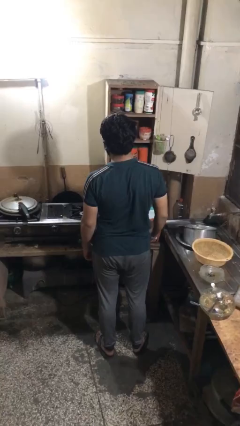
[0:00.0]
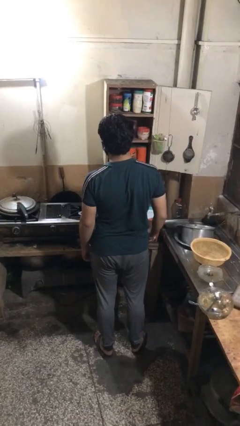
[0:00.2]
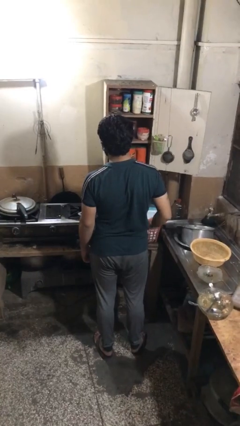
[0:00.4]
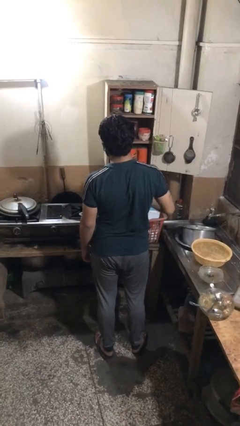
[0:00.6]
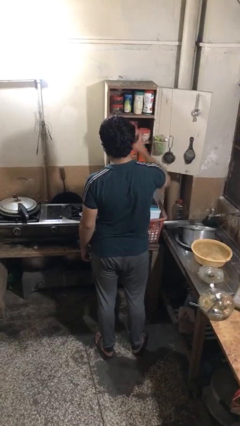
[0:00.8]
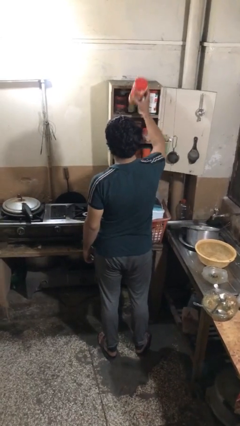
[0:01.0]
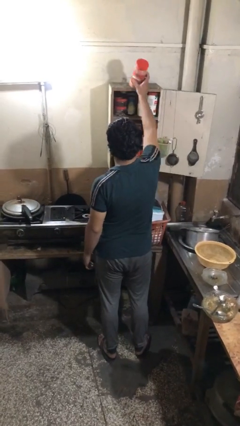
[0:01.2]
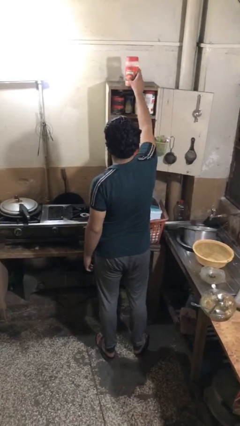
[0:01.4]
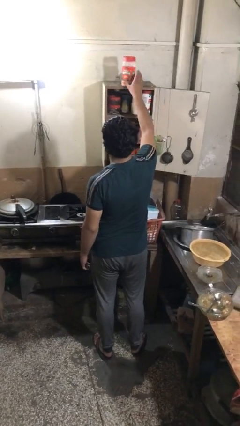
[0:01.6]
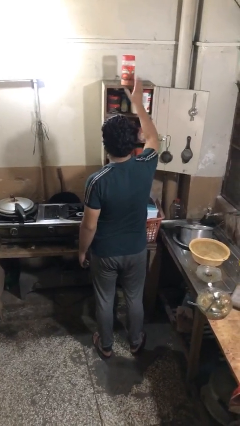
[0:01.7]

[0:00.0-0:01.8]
person takes object from cabinet

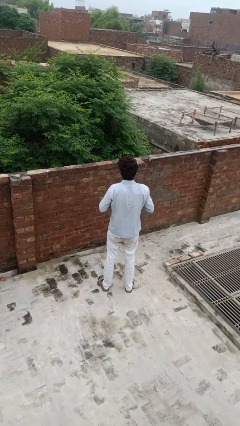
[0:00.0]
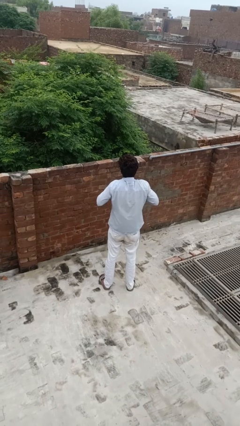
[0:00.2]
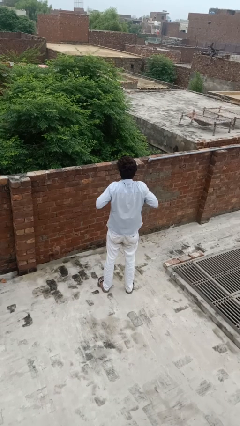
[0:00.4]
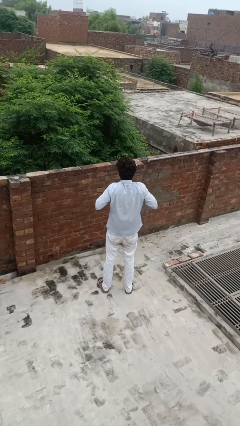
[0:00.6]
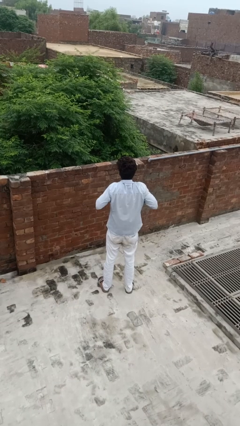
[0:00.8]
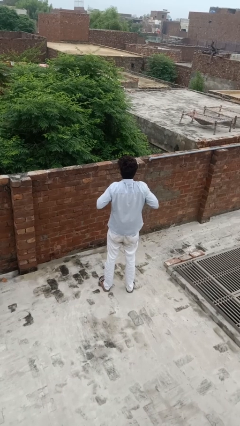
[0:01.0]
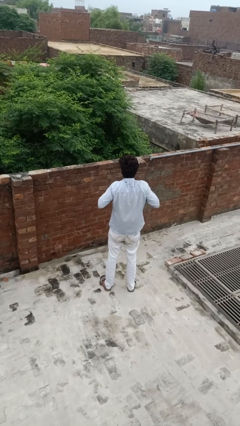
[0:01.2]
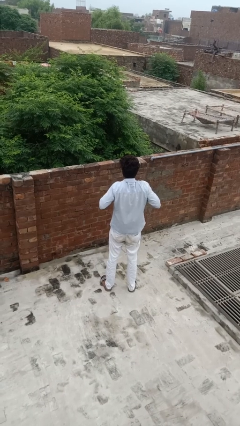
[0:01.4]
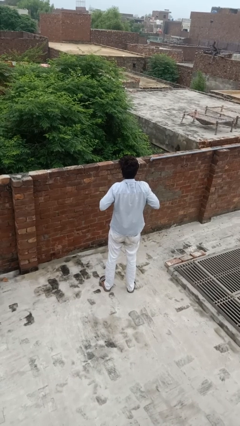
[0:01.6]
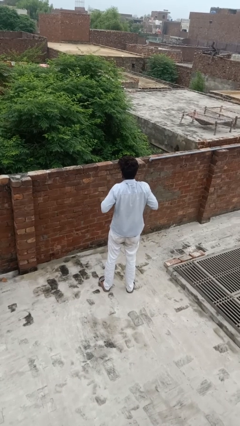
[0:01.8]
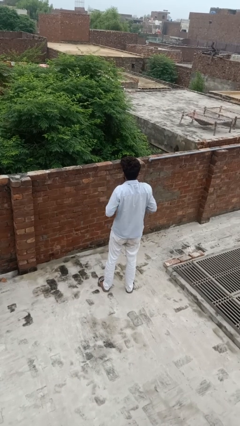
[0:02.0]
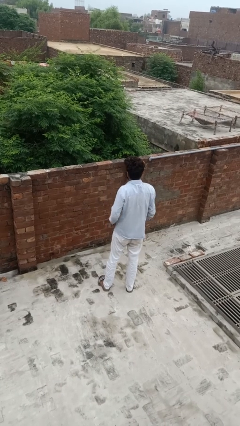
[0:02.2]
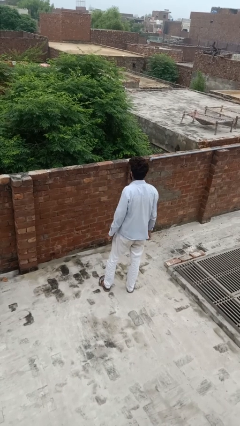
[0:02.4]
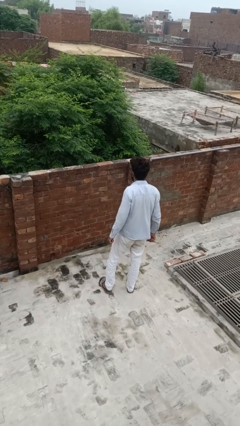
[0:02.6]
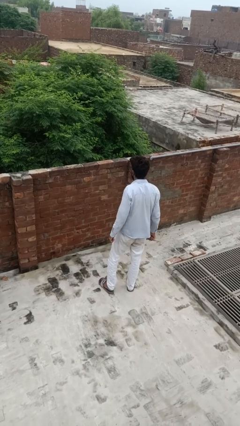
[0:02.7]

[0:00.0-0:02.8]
person cracks knuckles

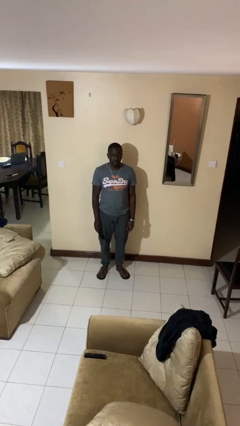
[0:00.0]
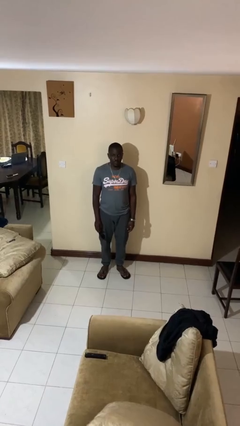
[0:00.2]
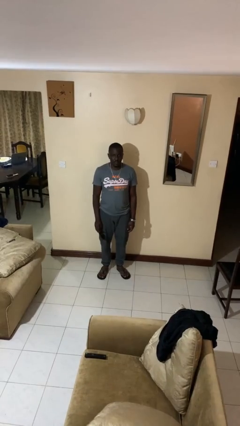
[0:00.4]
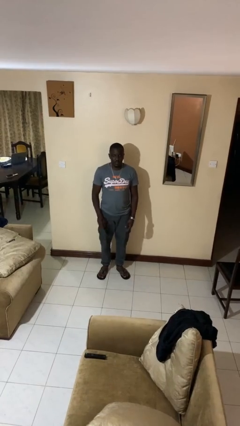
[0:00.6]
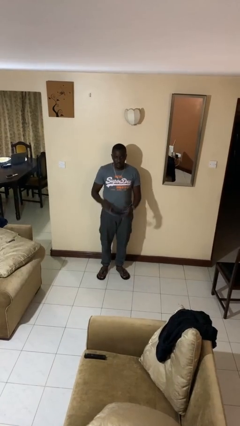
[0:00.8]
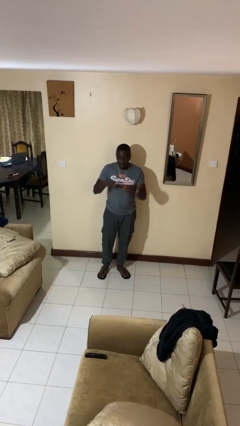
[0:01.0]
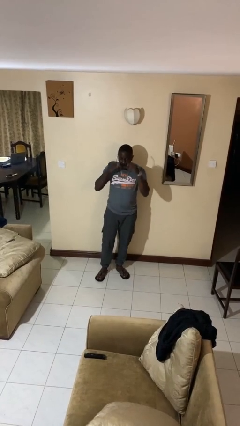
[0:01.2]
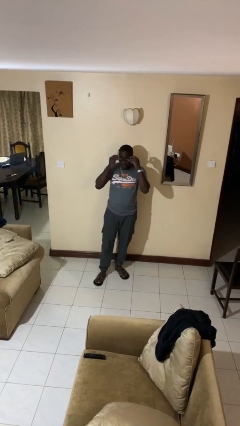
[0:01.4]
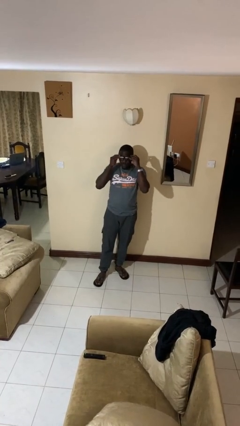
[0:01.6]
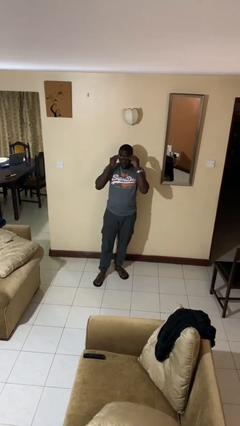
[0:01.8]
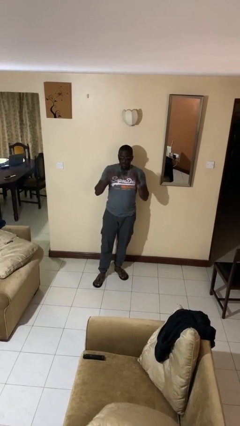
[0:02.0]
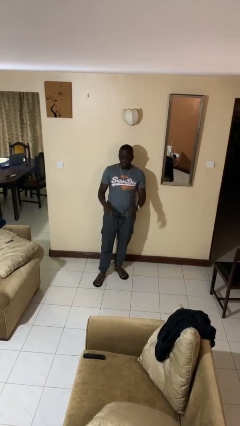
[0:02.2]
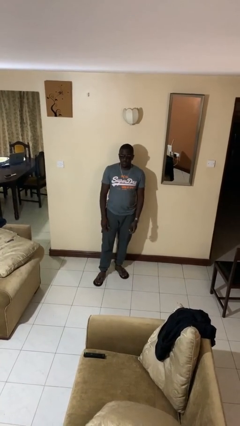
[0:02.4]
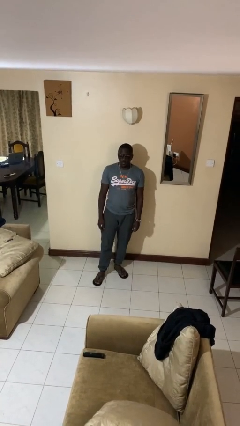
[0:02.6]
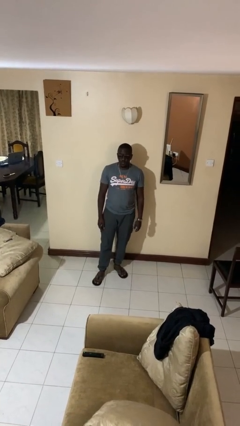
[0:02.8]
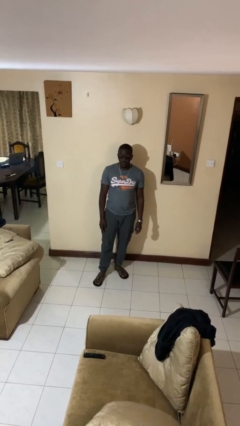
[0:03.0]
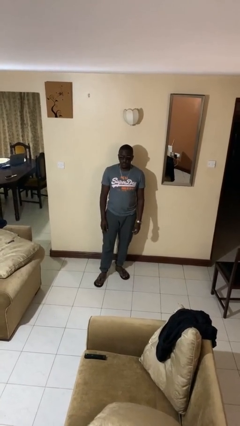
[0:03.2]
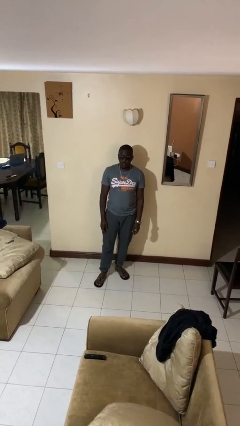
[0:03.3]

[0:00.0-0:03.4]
person puts on sunglasses

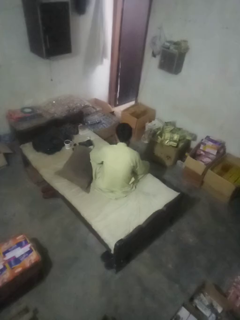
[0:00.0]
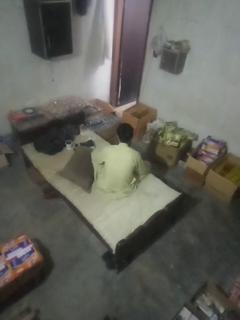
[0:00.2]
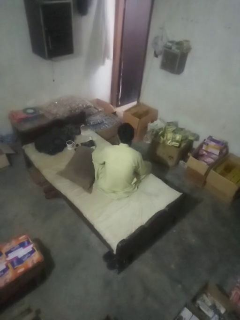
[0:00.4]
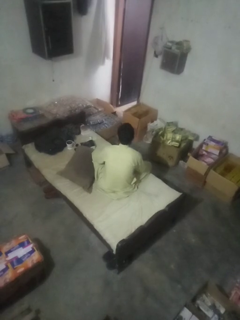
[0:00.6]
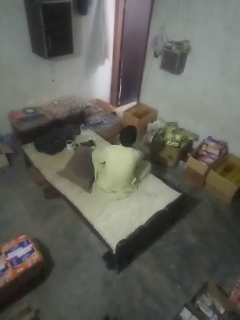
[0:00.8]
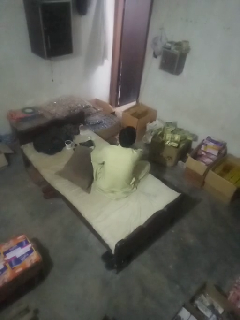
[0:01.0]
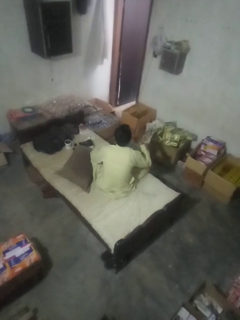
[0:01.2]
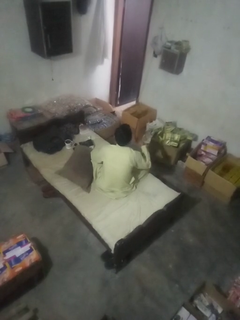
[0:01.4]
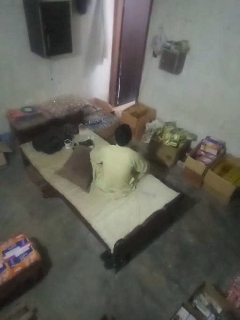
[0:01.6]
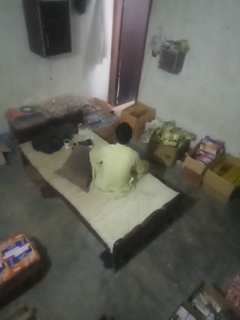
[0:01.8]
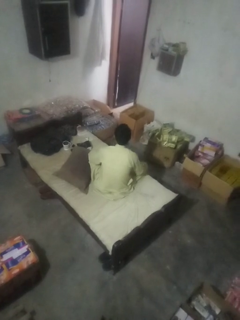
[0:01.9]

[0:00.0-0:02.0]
person gestures cut

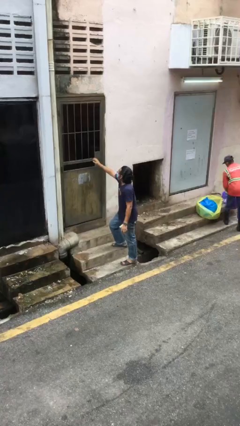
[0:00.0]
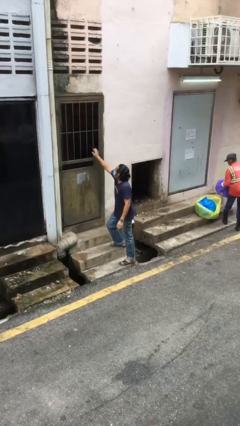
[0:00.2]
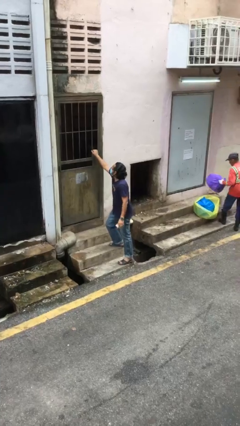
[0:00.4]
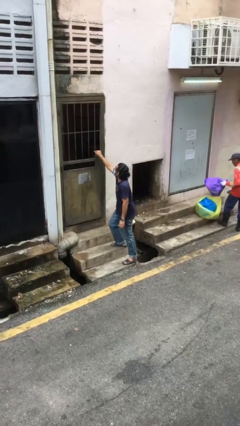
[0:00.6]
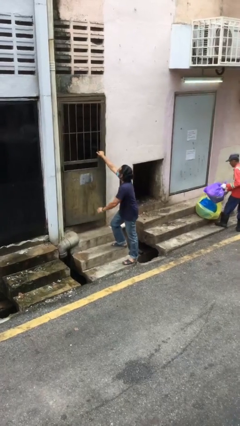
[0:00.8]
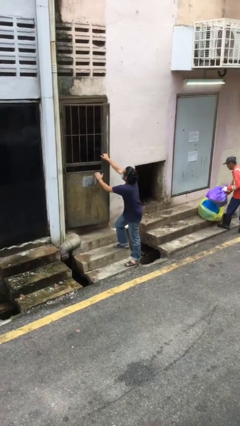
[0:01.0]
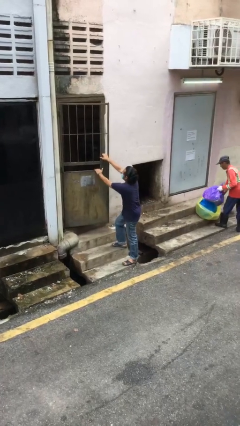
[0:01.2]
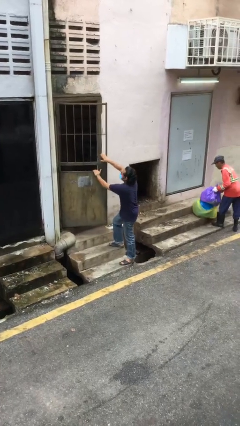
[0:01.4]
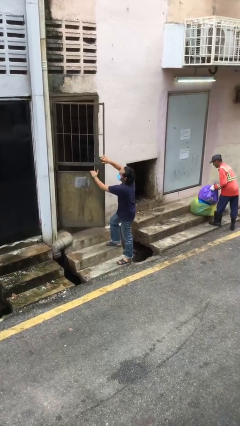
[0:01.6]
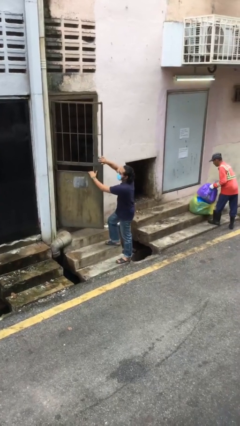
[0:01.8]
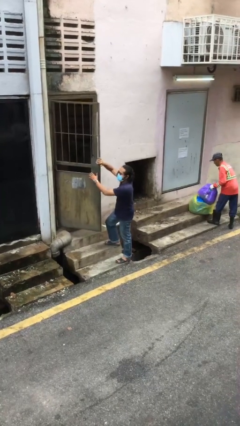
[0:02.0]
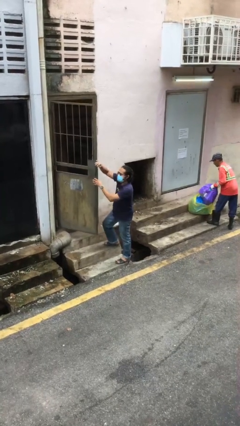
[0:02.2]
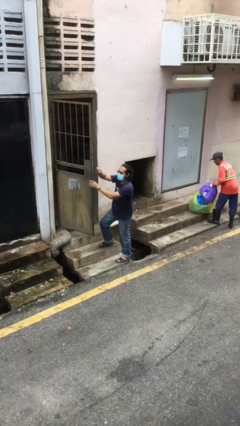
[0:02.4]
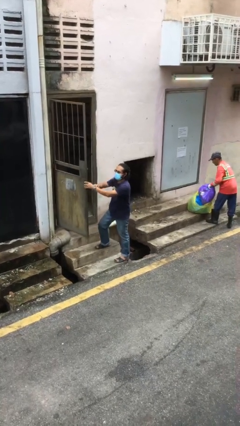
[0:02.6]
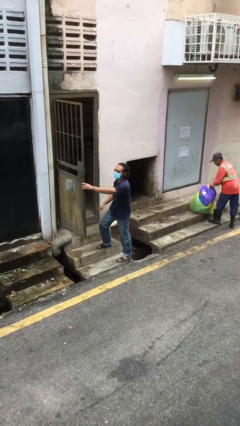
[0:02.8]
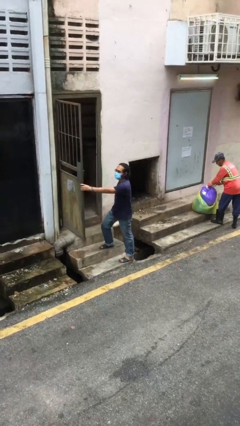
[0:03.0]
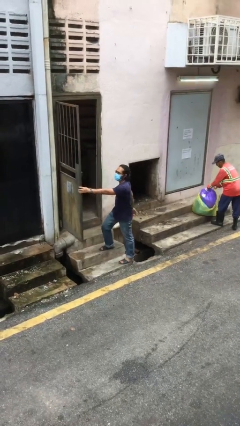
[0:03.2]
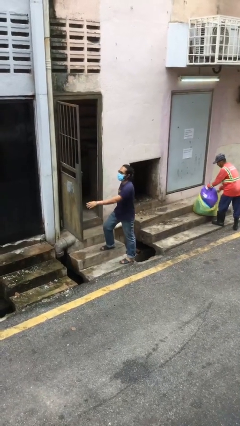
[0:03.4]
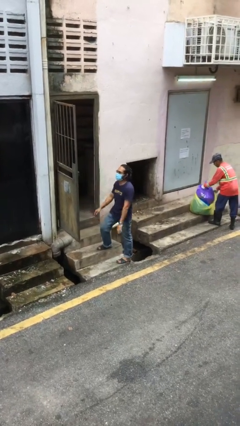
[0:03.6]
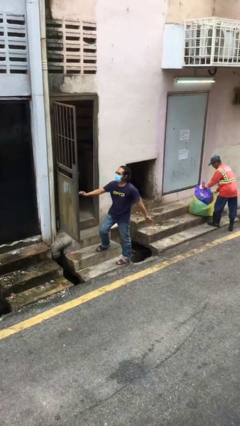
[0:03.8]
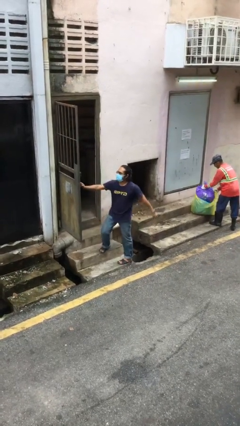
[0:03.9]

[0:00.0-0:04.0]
person opens facility door

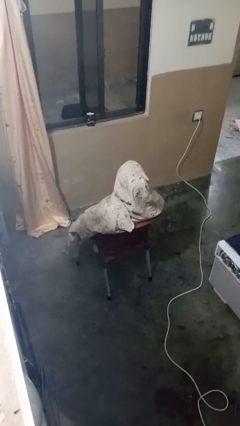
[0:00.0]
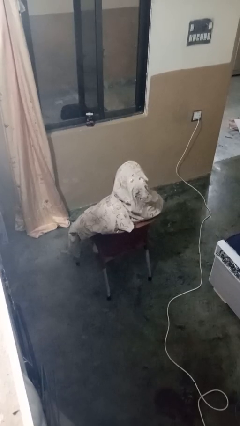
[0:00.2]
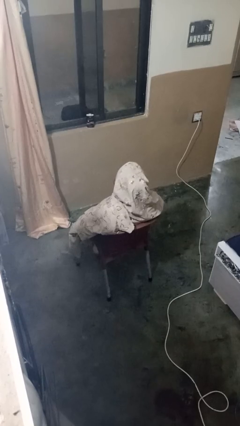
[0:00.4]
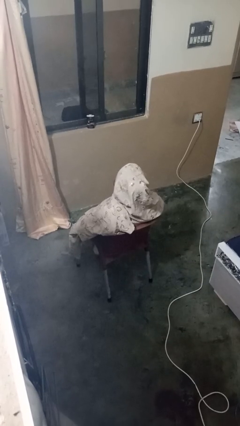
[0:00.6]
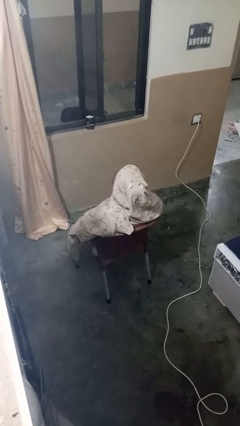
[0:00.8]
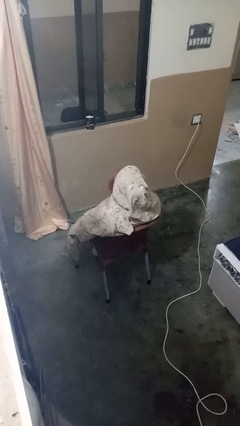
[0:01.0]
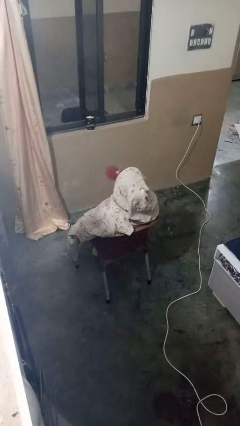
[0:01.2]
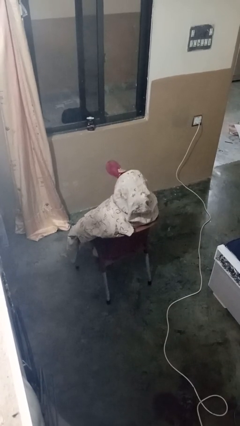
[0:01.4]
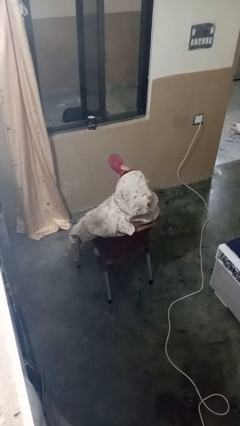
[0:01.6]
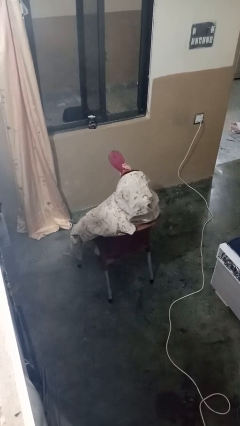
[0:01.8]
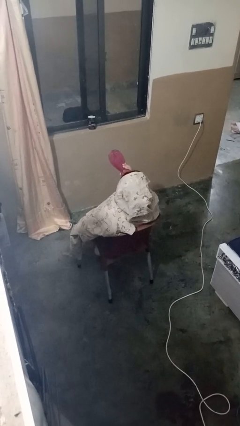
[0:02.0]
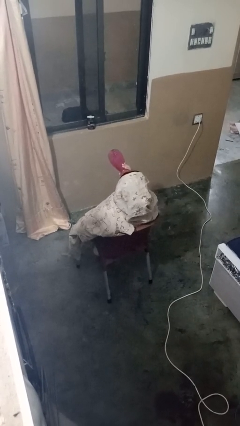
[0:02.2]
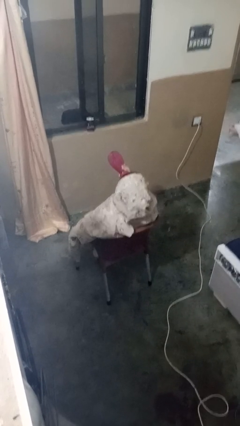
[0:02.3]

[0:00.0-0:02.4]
person drinks from bottle

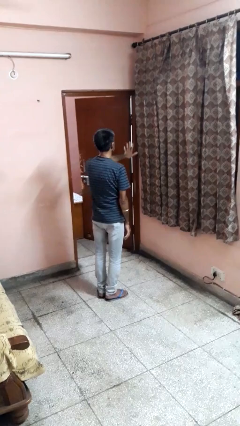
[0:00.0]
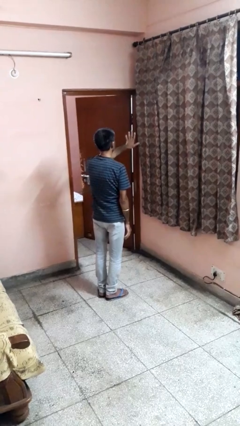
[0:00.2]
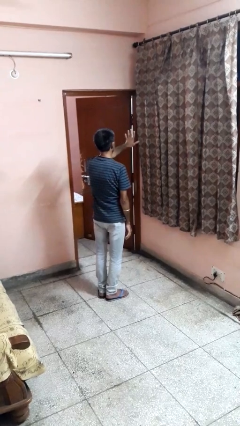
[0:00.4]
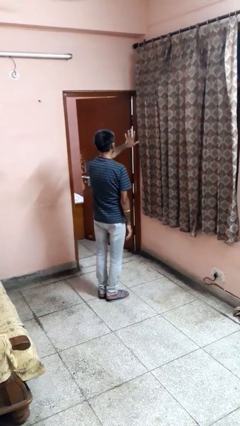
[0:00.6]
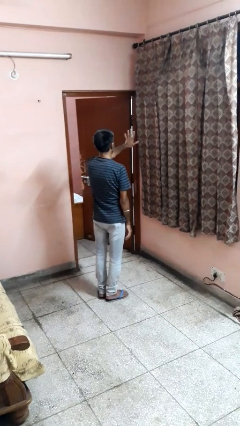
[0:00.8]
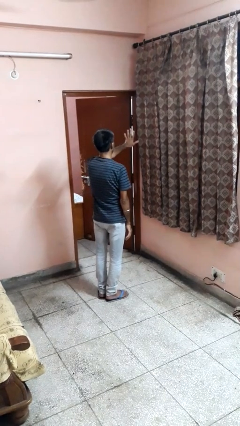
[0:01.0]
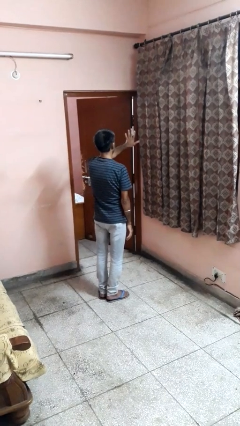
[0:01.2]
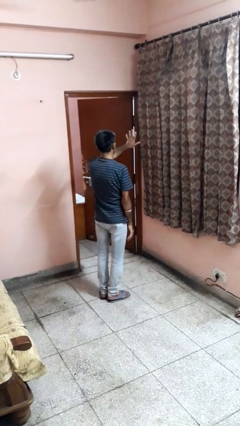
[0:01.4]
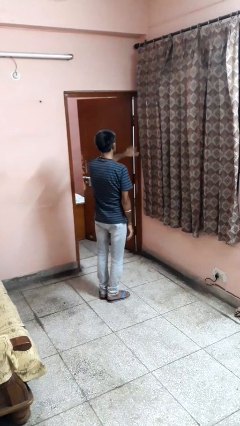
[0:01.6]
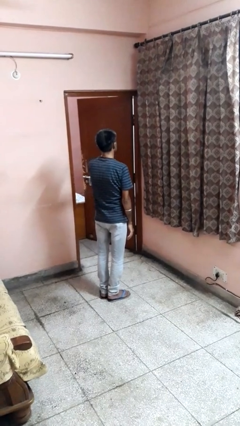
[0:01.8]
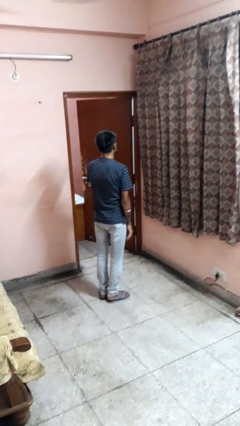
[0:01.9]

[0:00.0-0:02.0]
person gestures number five
